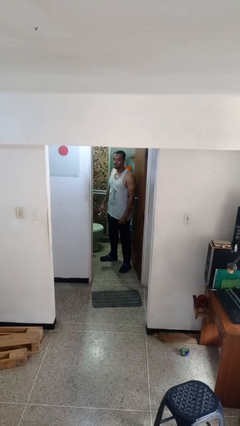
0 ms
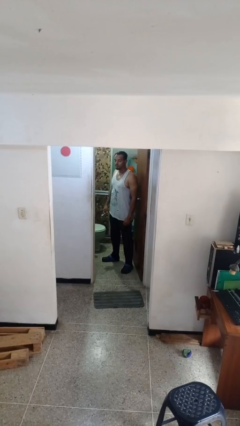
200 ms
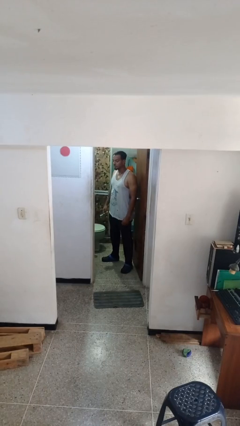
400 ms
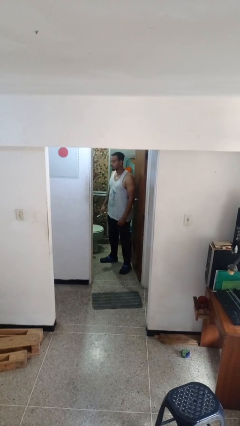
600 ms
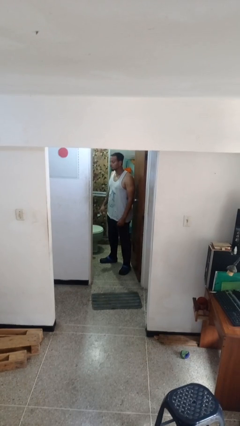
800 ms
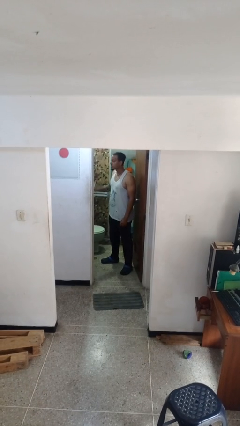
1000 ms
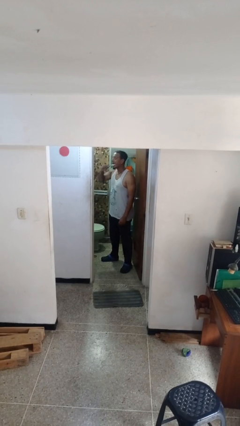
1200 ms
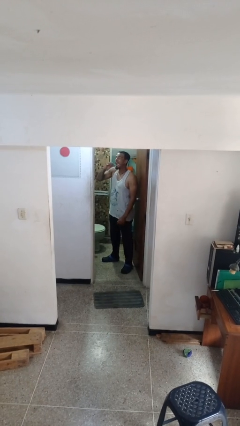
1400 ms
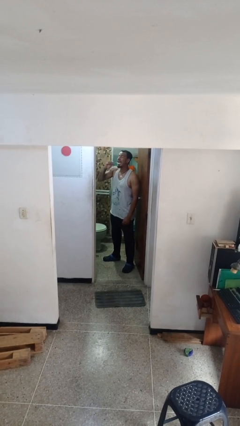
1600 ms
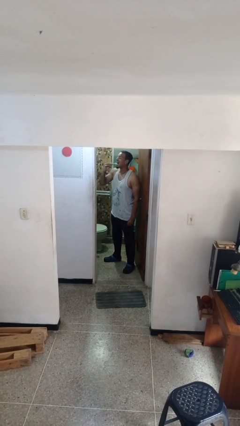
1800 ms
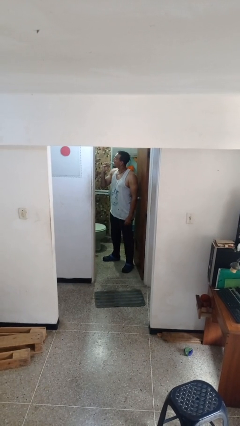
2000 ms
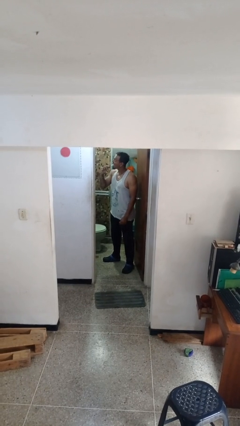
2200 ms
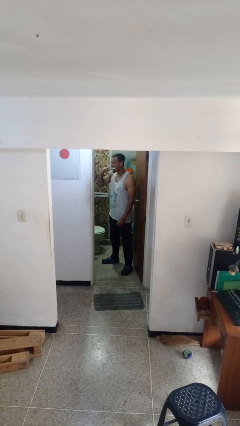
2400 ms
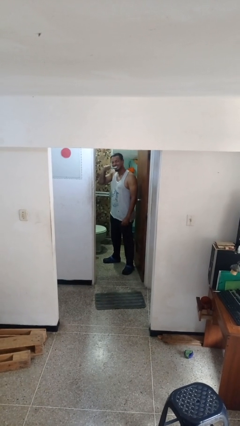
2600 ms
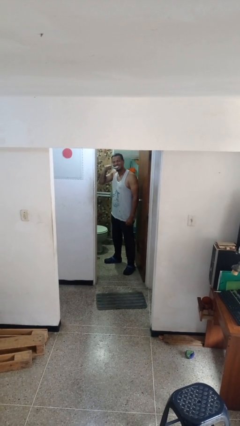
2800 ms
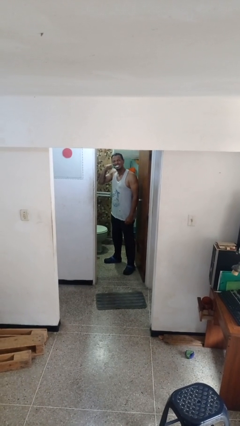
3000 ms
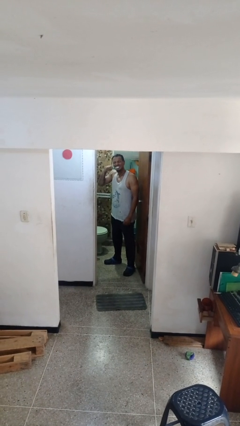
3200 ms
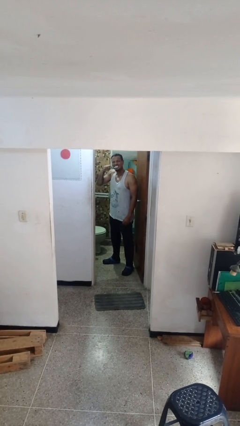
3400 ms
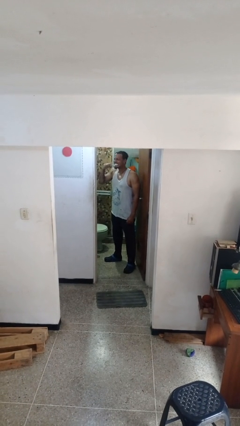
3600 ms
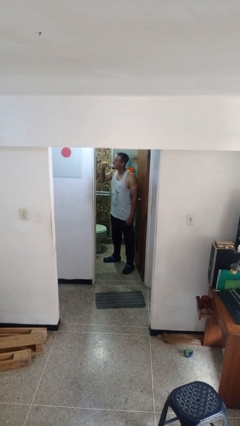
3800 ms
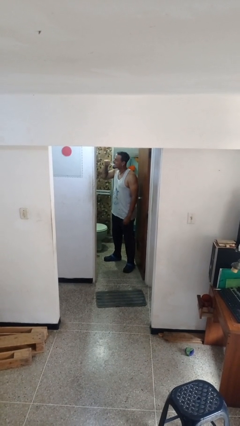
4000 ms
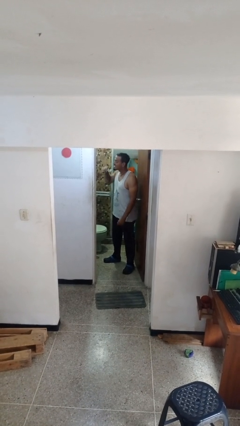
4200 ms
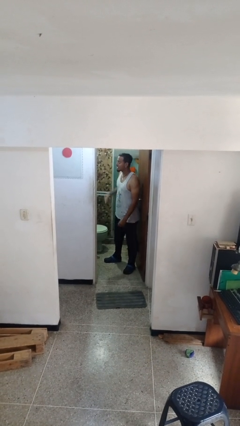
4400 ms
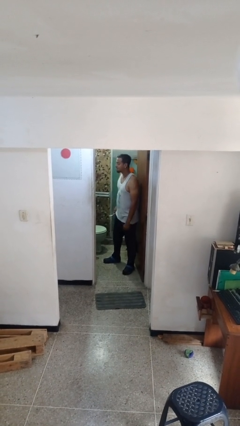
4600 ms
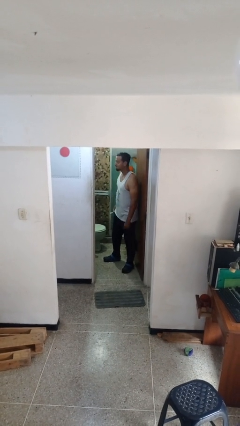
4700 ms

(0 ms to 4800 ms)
person brushes teeth

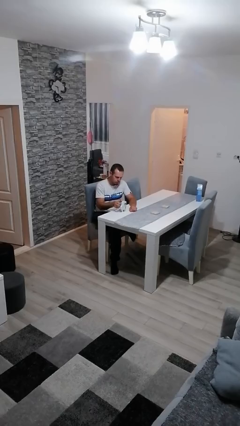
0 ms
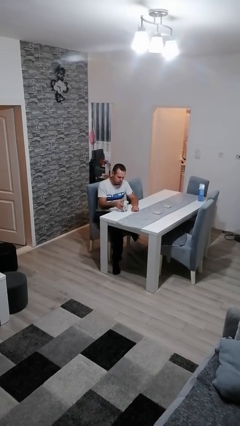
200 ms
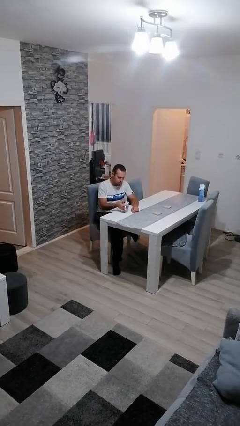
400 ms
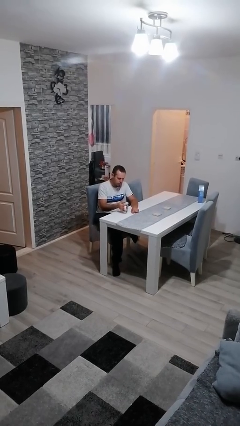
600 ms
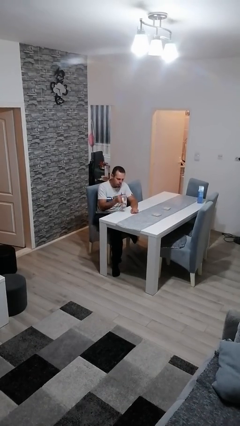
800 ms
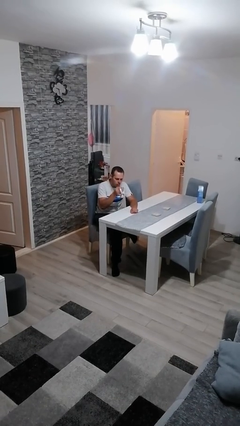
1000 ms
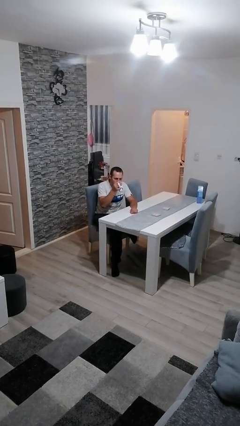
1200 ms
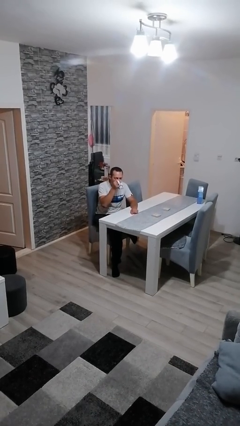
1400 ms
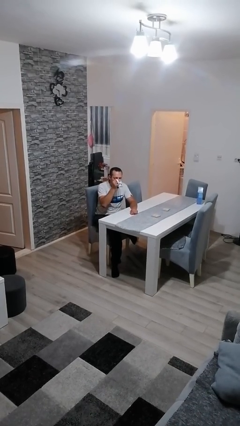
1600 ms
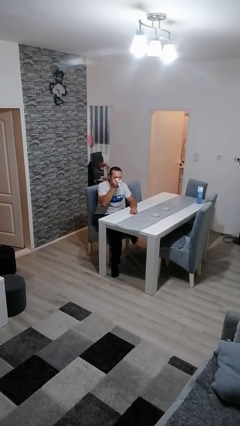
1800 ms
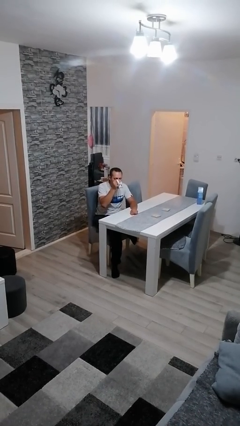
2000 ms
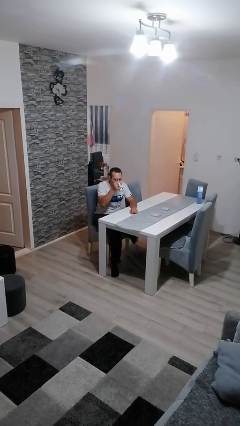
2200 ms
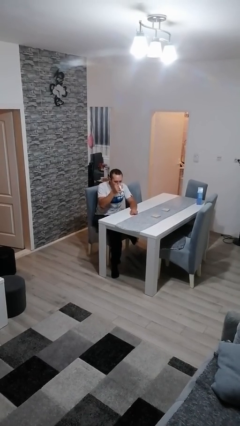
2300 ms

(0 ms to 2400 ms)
person drinks from mug

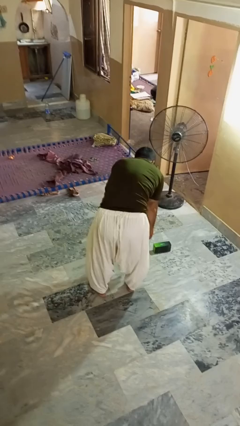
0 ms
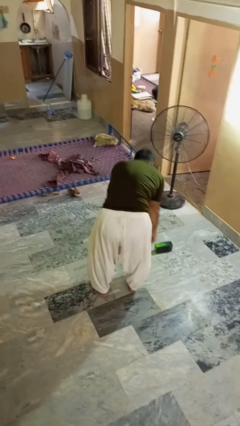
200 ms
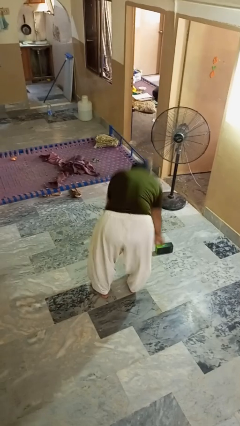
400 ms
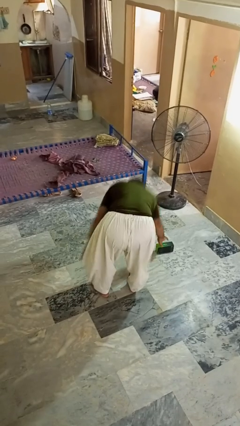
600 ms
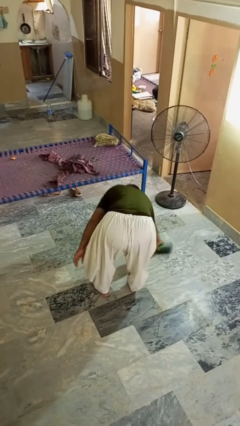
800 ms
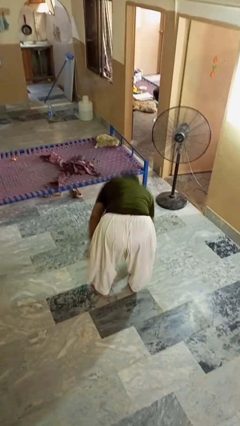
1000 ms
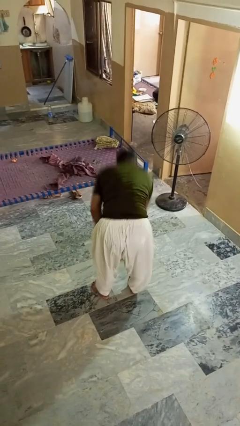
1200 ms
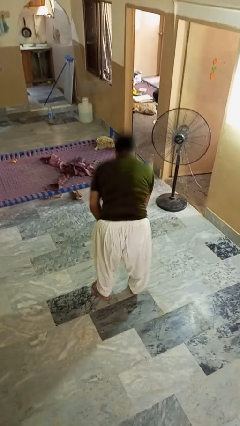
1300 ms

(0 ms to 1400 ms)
person picks up object from floor

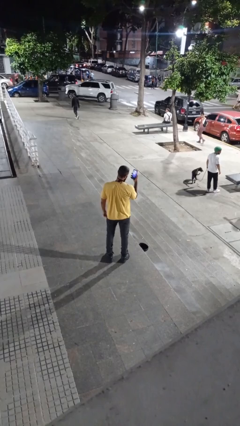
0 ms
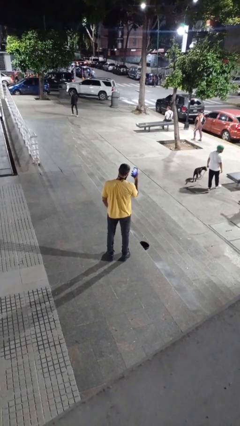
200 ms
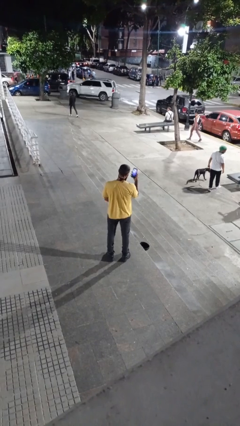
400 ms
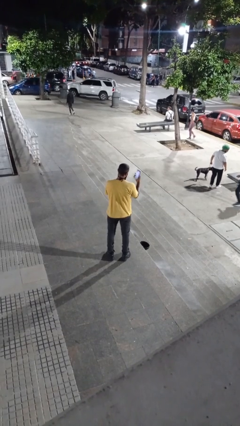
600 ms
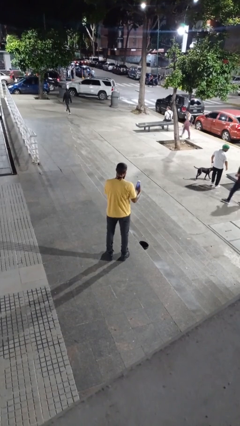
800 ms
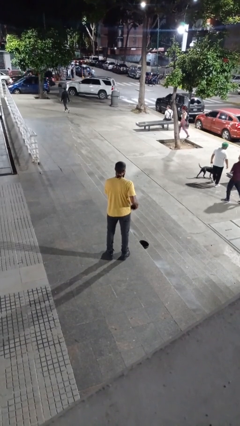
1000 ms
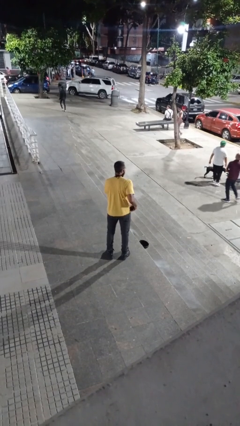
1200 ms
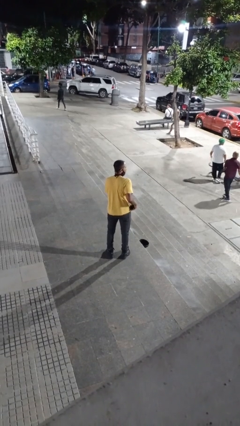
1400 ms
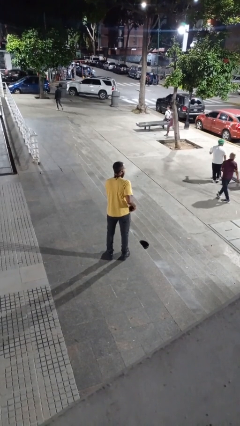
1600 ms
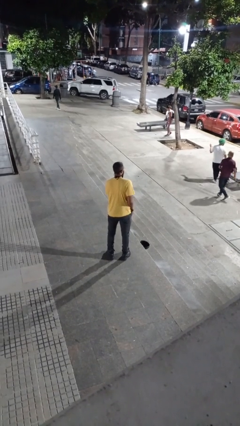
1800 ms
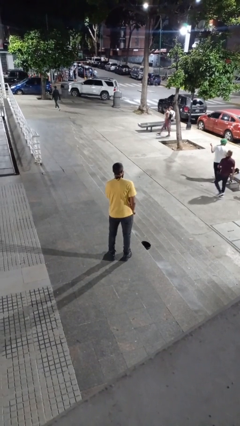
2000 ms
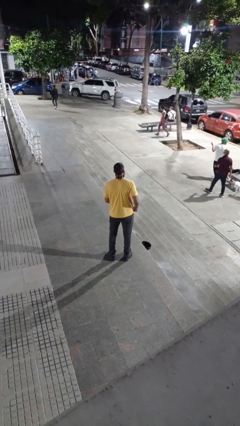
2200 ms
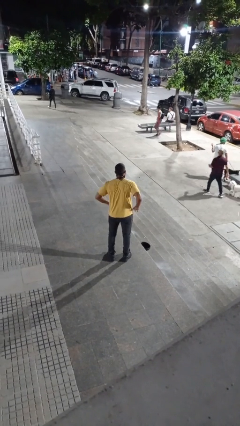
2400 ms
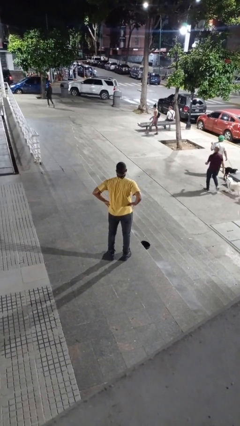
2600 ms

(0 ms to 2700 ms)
person puts phone into pocket

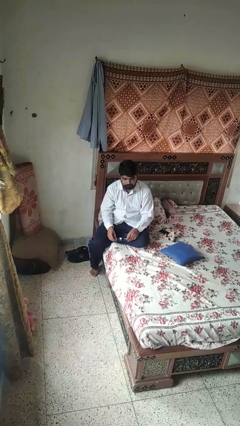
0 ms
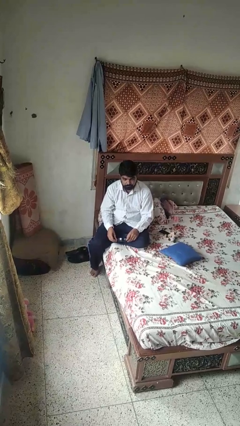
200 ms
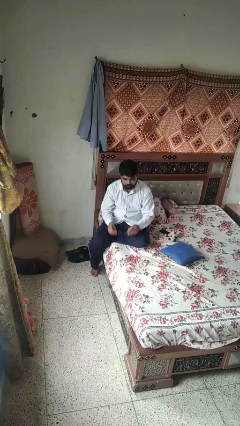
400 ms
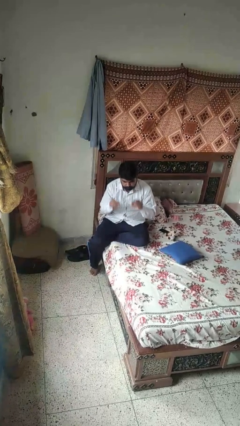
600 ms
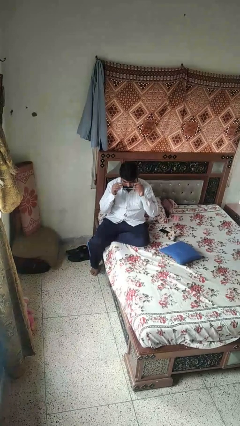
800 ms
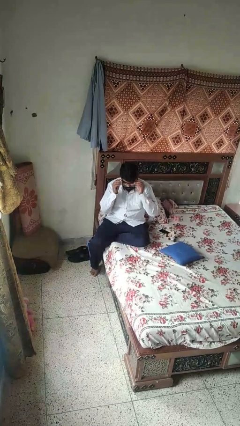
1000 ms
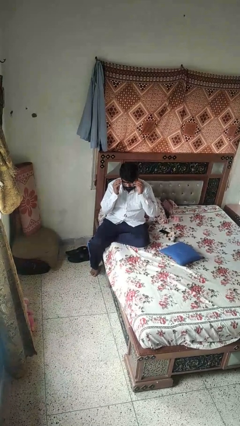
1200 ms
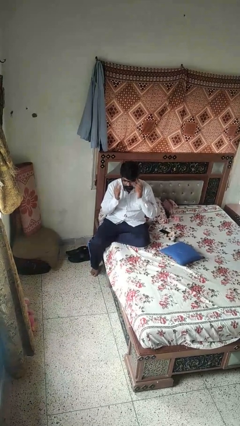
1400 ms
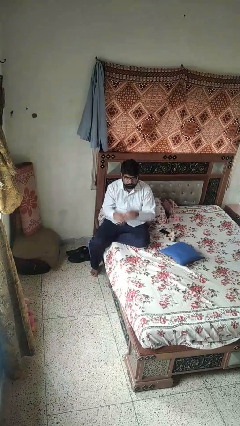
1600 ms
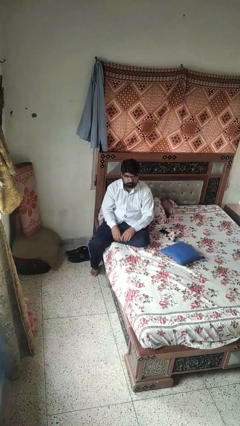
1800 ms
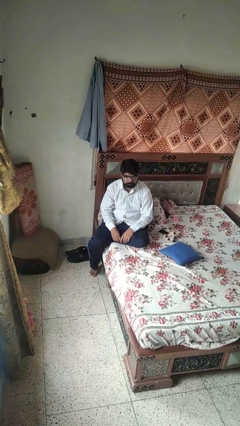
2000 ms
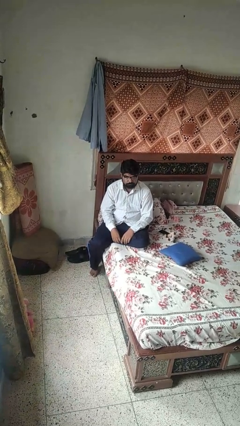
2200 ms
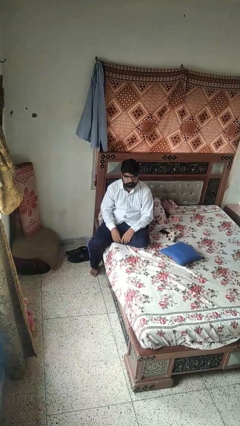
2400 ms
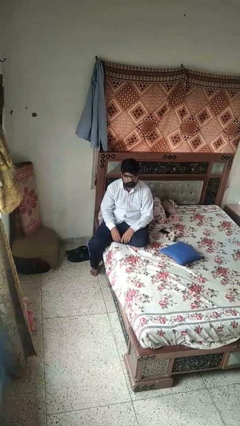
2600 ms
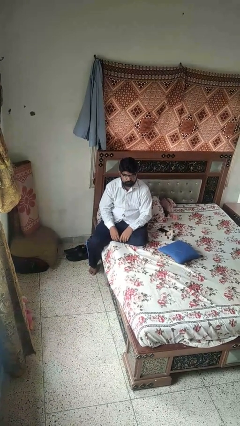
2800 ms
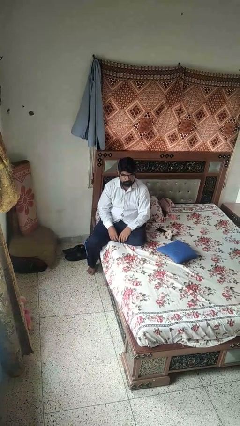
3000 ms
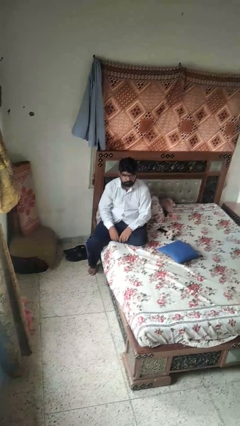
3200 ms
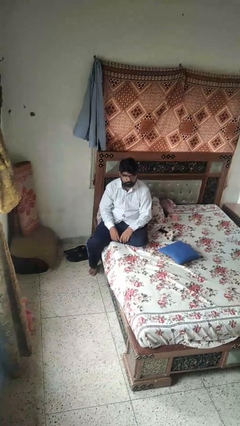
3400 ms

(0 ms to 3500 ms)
person puts on glasses

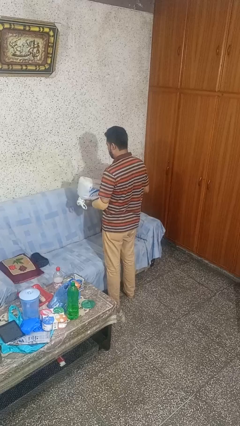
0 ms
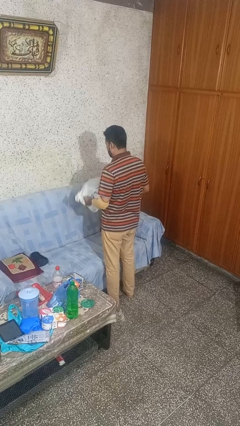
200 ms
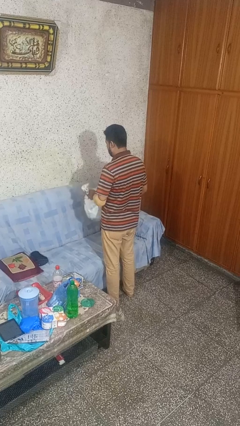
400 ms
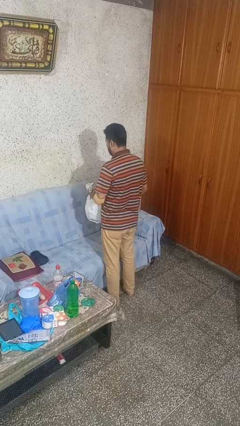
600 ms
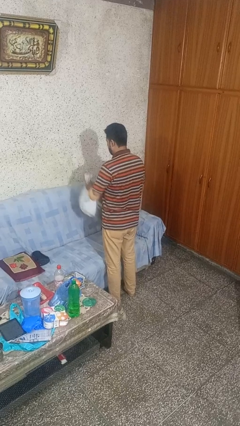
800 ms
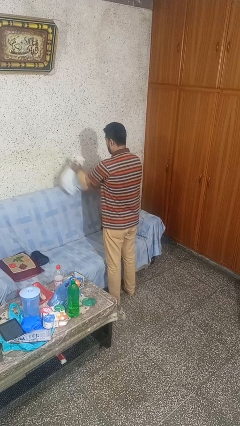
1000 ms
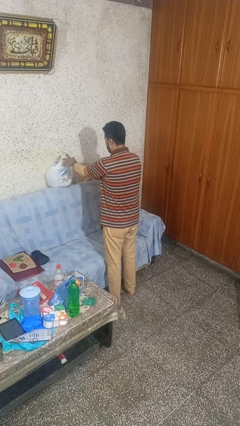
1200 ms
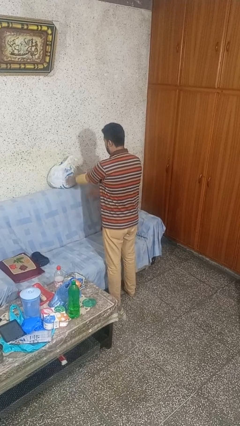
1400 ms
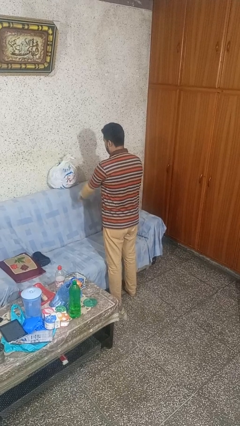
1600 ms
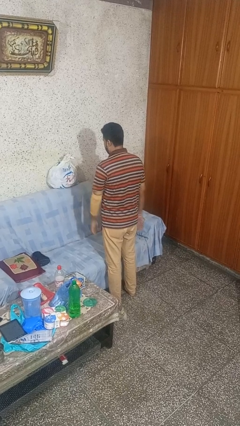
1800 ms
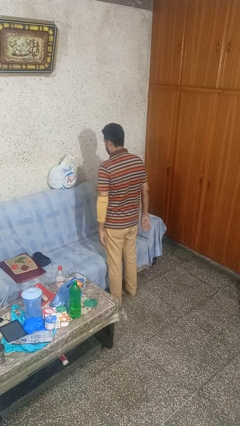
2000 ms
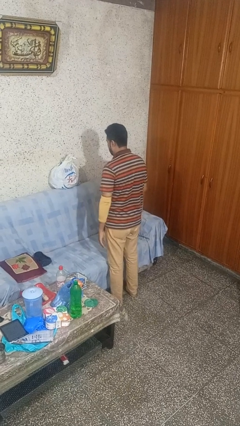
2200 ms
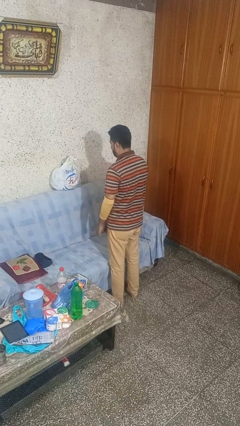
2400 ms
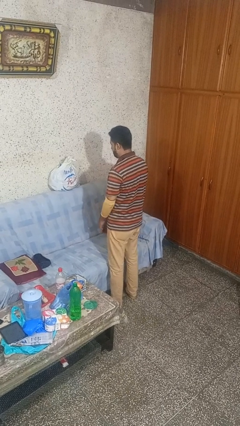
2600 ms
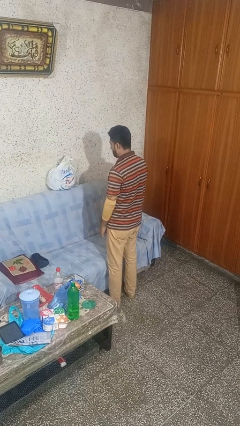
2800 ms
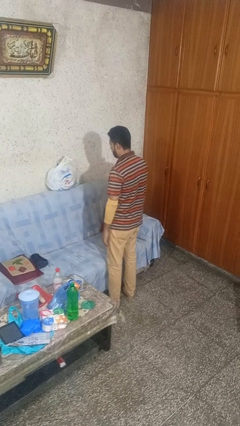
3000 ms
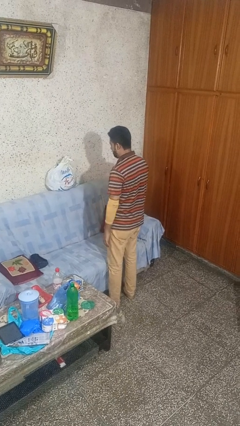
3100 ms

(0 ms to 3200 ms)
person puts down object on couch
